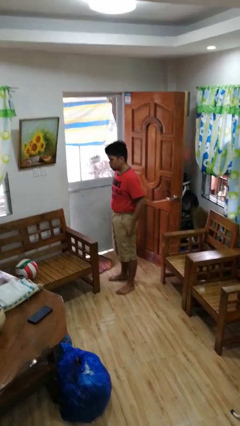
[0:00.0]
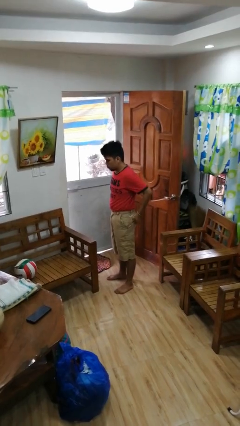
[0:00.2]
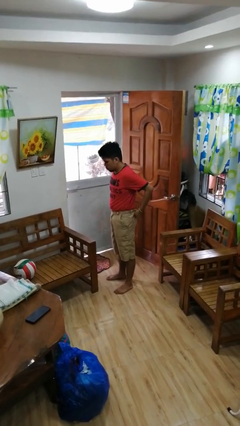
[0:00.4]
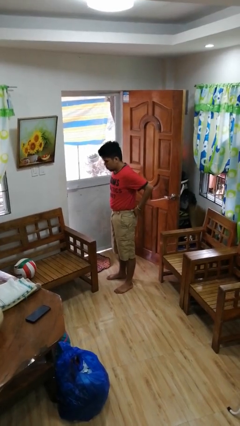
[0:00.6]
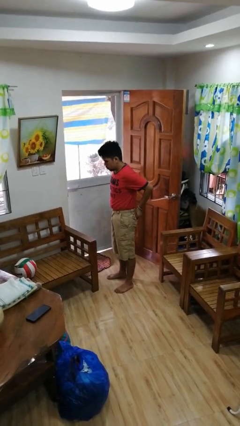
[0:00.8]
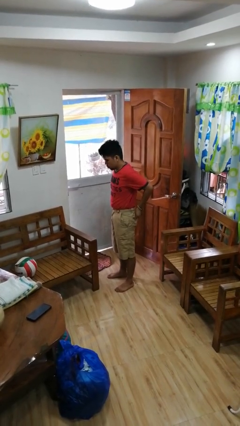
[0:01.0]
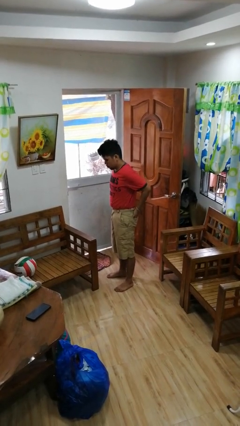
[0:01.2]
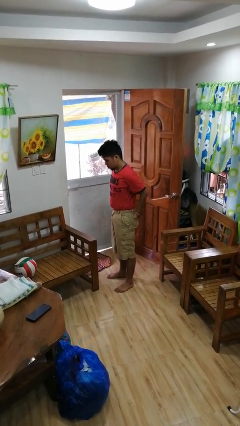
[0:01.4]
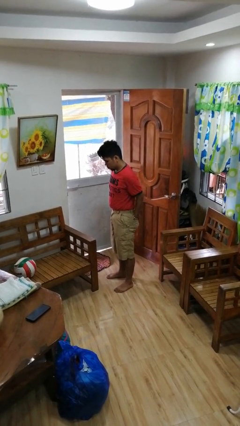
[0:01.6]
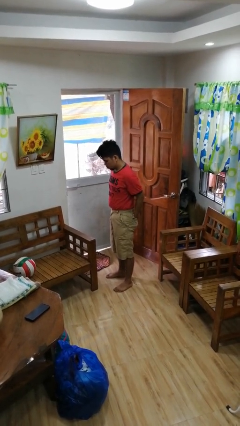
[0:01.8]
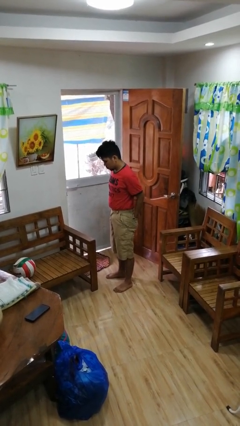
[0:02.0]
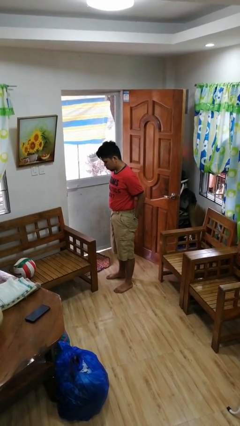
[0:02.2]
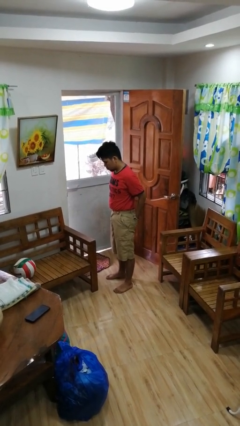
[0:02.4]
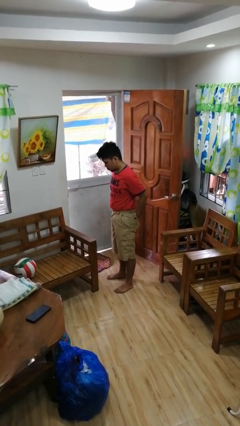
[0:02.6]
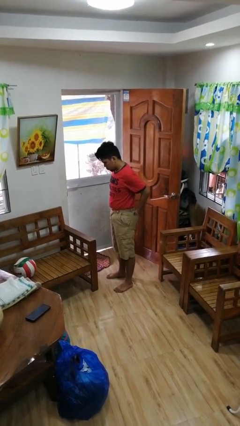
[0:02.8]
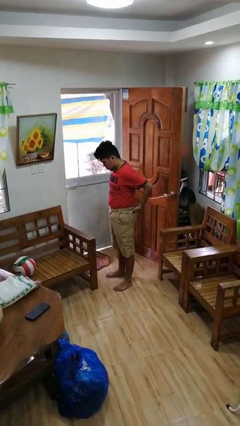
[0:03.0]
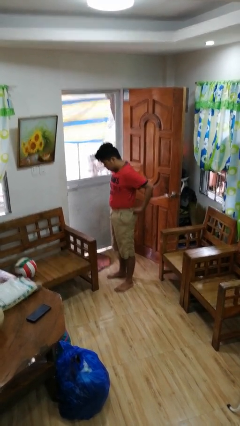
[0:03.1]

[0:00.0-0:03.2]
person puts hands in back pockets

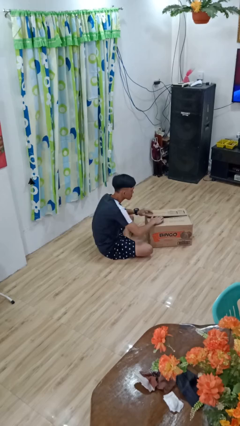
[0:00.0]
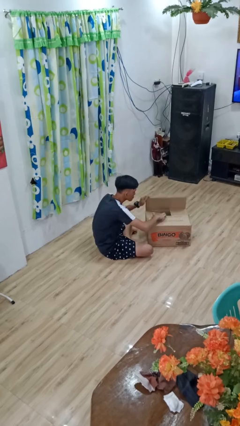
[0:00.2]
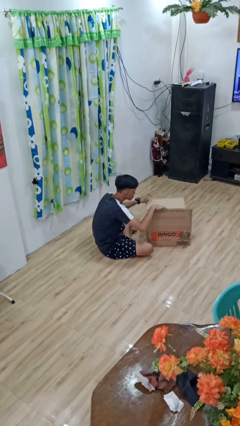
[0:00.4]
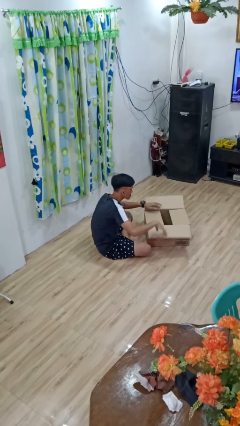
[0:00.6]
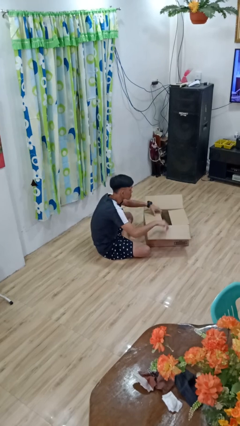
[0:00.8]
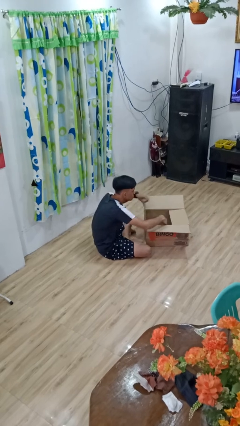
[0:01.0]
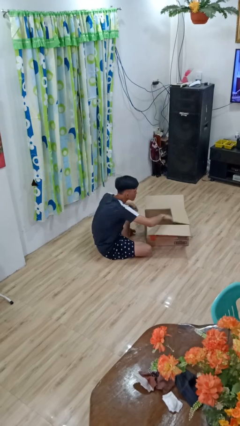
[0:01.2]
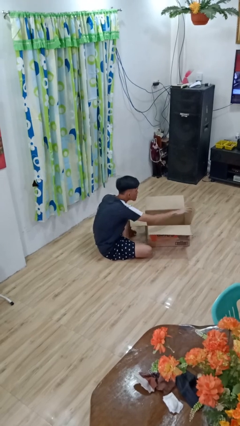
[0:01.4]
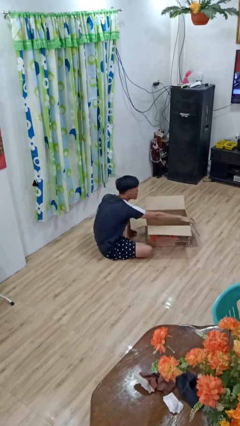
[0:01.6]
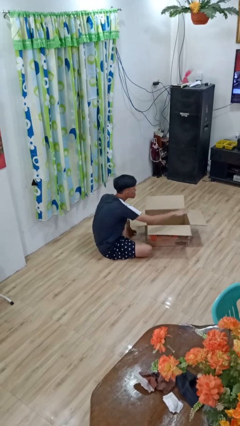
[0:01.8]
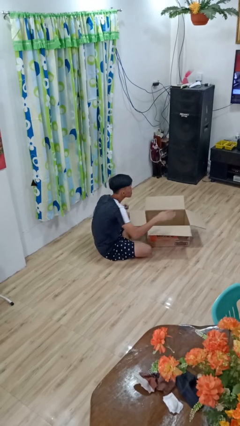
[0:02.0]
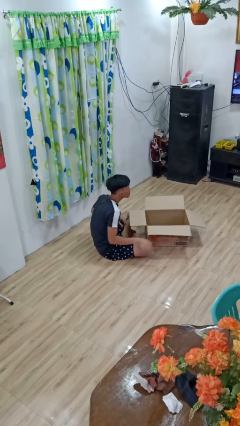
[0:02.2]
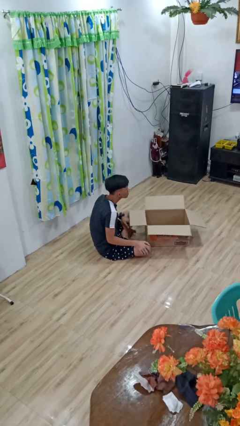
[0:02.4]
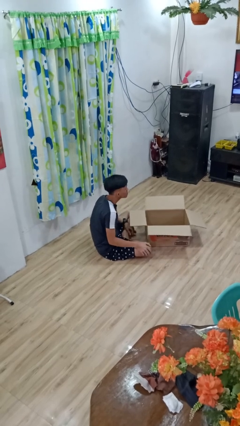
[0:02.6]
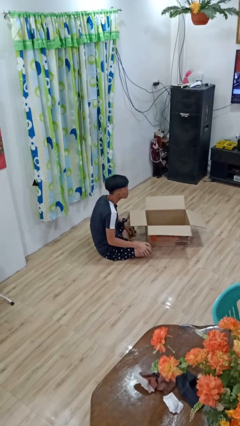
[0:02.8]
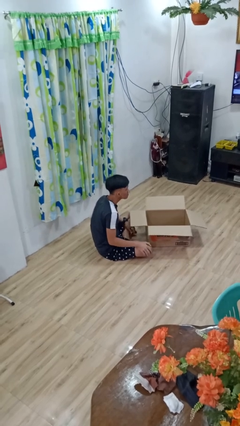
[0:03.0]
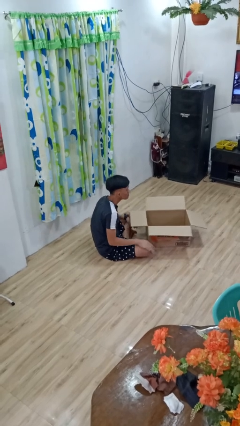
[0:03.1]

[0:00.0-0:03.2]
person opens box

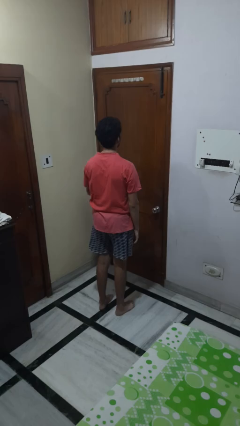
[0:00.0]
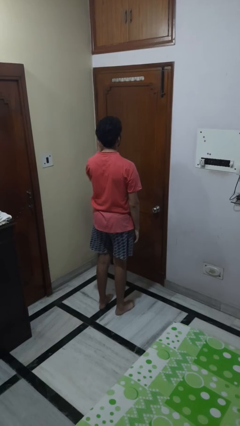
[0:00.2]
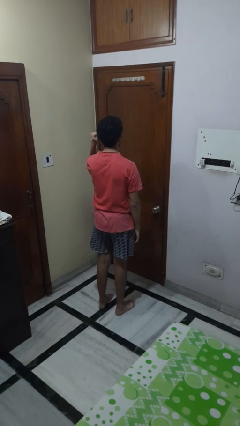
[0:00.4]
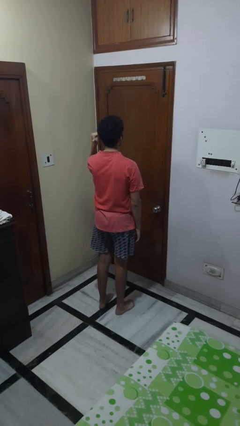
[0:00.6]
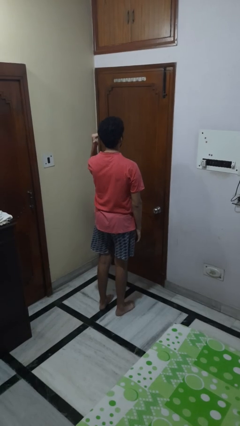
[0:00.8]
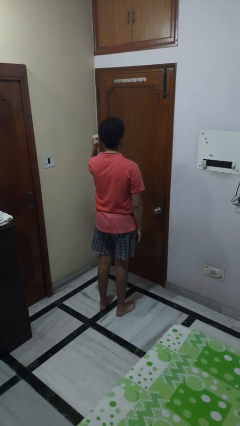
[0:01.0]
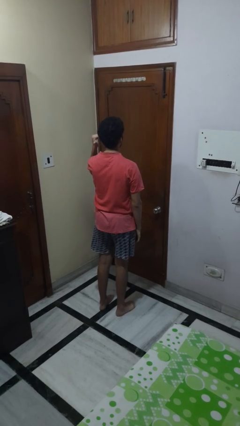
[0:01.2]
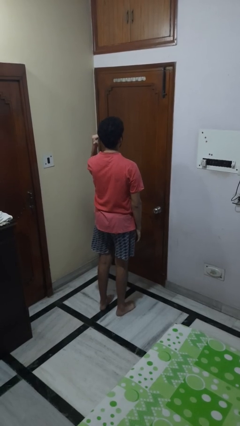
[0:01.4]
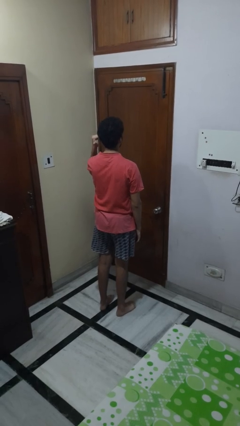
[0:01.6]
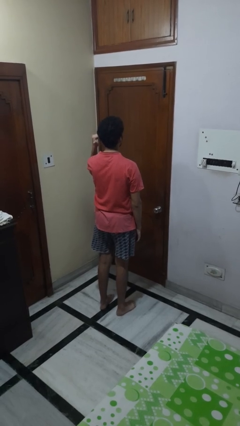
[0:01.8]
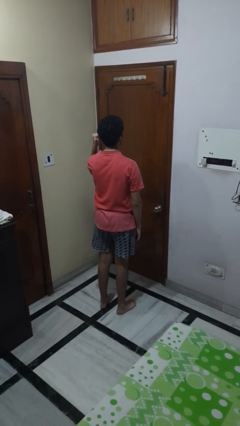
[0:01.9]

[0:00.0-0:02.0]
person gestures behind me

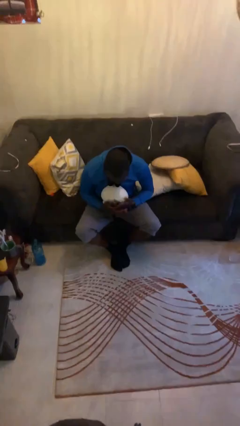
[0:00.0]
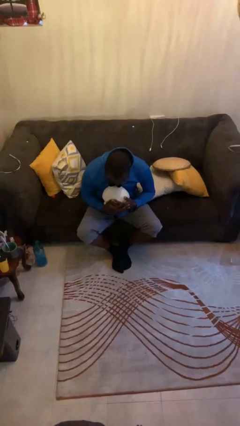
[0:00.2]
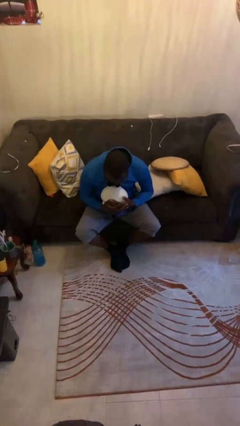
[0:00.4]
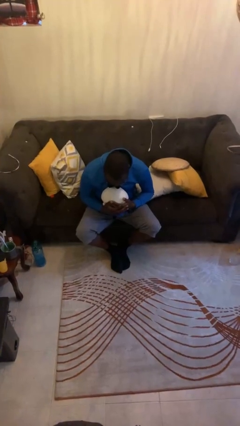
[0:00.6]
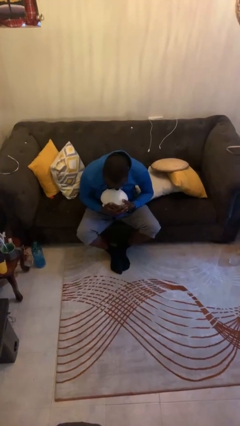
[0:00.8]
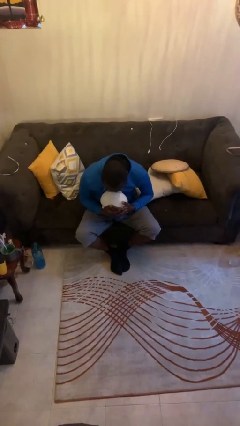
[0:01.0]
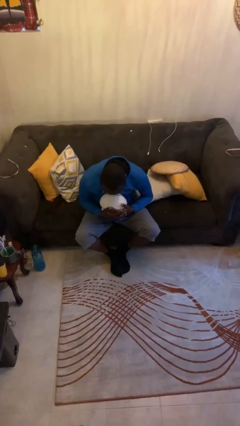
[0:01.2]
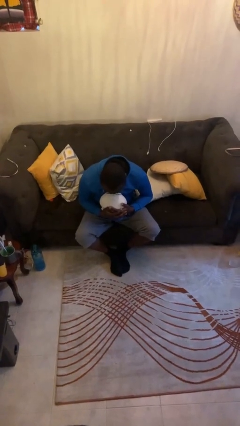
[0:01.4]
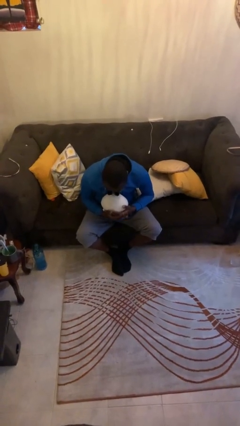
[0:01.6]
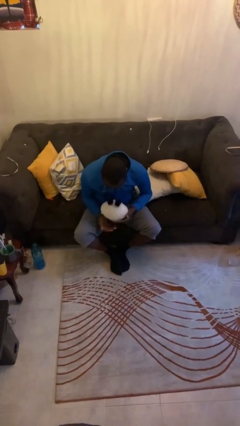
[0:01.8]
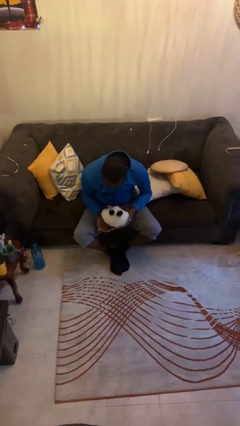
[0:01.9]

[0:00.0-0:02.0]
person hugs stuffed animal

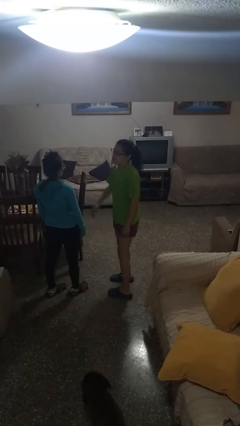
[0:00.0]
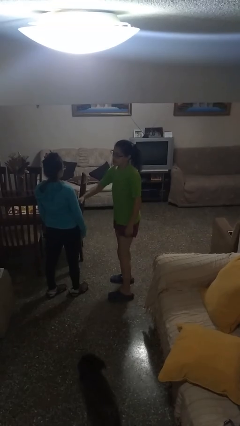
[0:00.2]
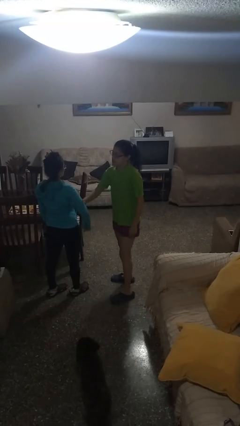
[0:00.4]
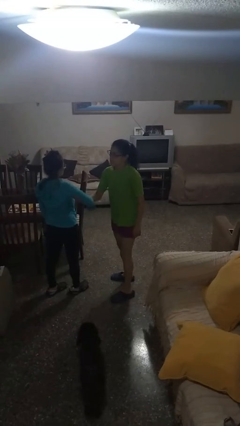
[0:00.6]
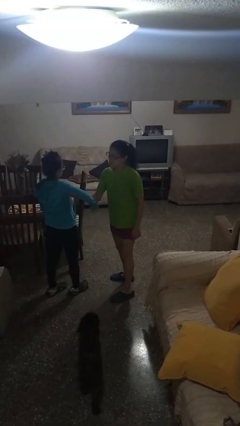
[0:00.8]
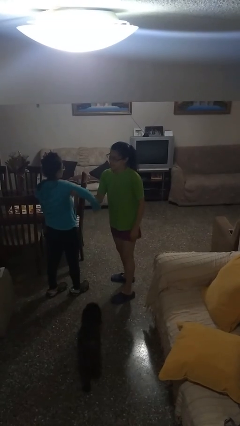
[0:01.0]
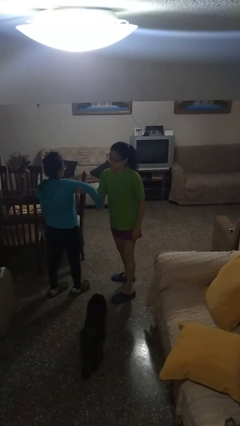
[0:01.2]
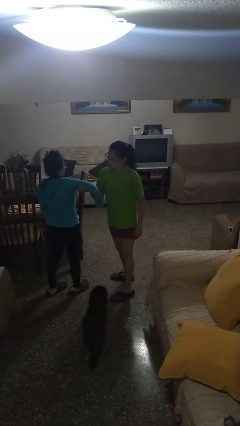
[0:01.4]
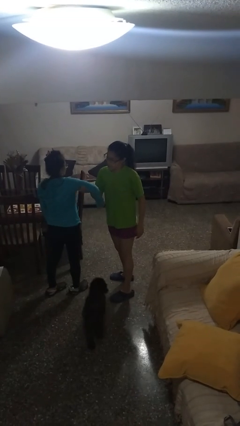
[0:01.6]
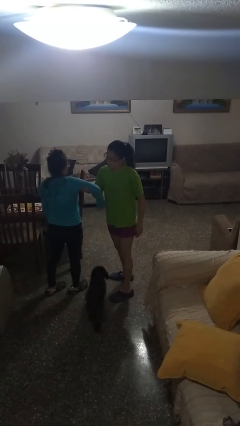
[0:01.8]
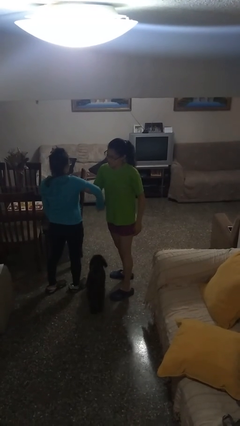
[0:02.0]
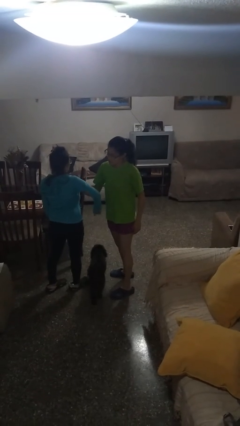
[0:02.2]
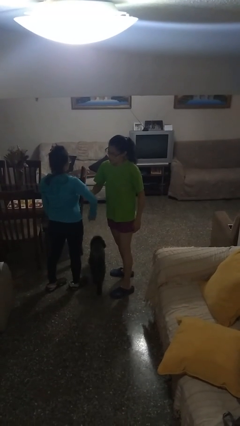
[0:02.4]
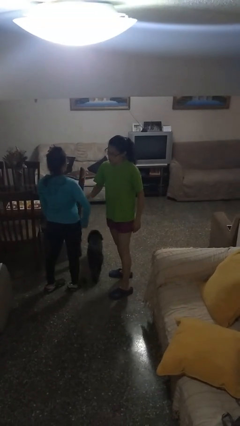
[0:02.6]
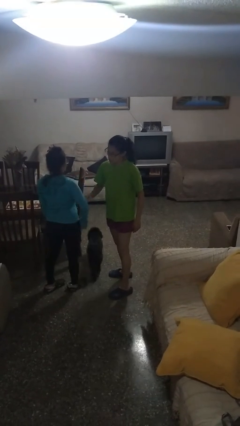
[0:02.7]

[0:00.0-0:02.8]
person grabs person by bicep

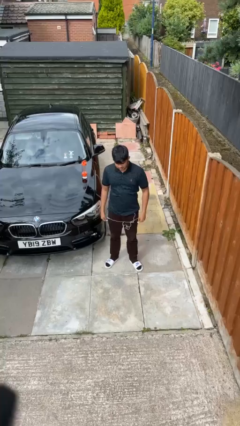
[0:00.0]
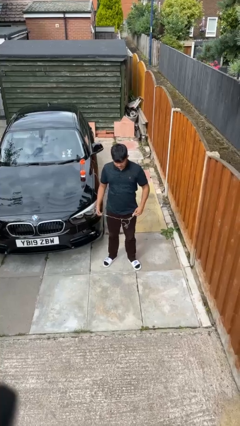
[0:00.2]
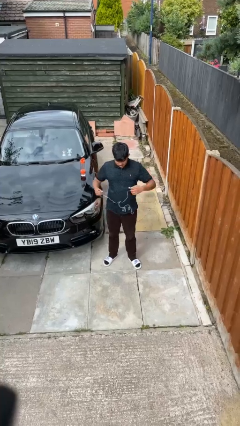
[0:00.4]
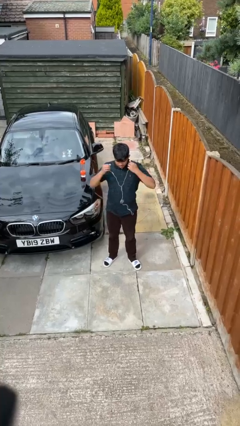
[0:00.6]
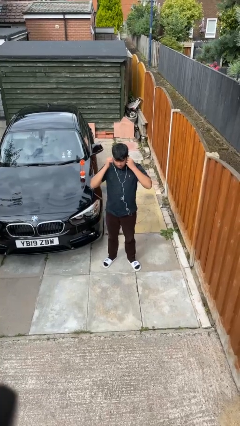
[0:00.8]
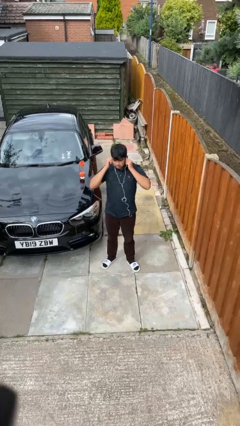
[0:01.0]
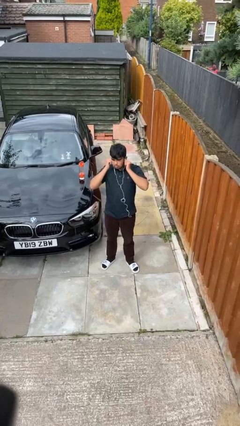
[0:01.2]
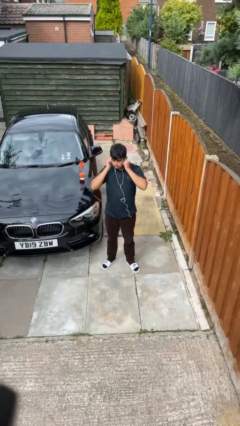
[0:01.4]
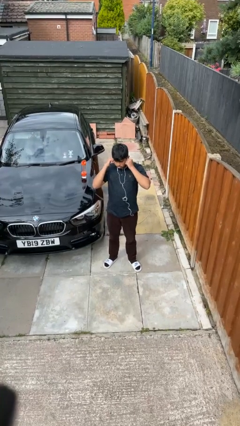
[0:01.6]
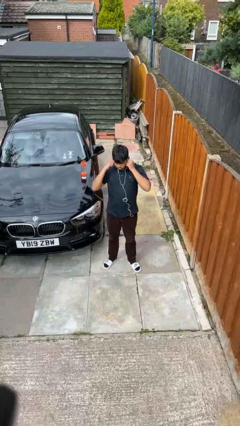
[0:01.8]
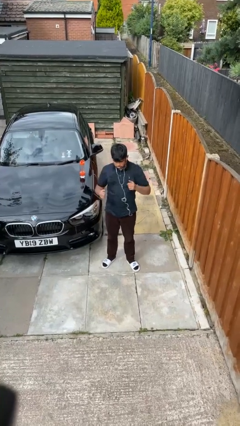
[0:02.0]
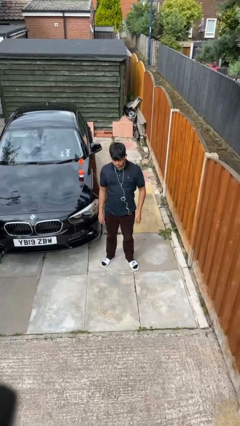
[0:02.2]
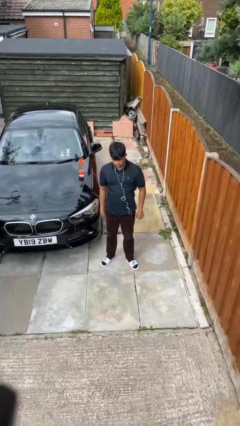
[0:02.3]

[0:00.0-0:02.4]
person puts on headphones

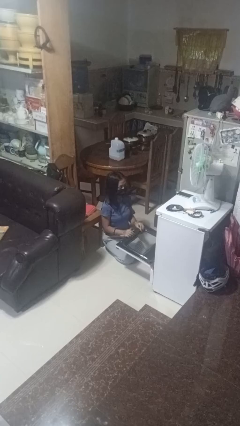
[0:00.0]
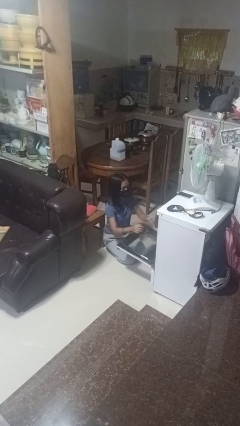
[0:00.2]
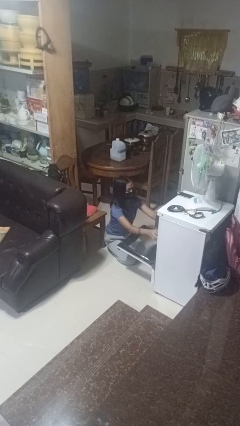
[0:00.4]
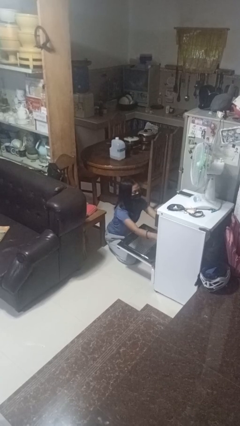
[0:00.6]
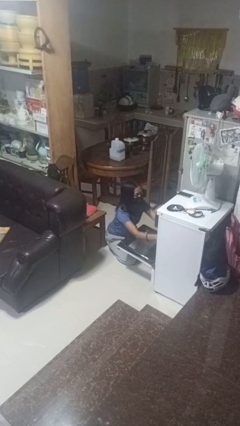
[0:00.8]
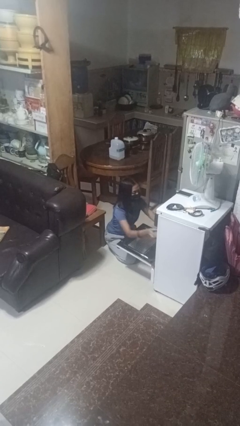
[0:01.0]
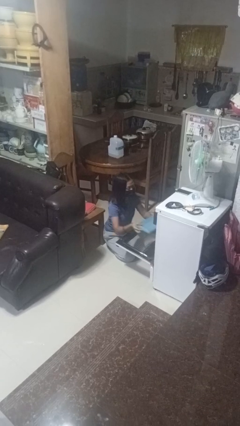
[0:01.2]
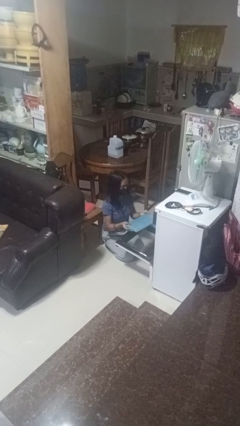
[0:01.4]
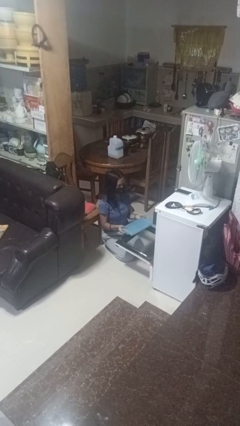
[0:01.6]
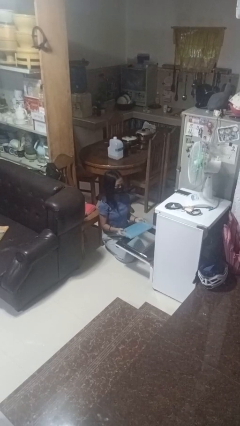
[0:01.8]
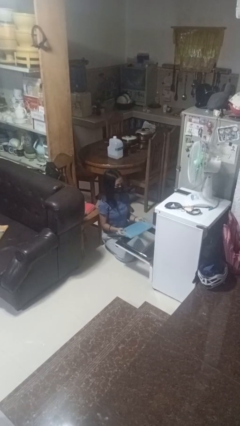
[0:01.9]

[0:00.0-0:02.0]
person takes object from oven
